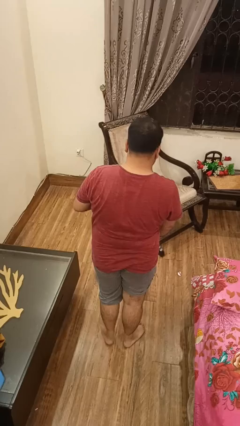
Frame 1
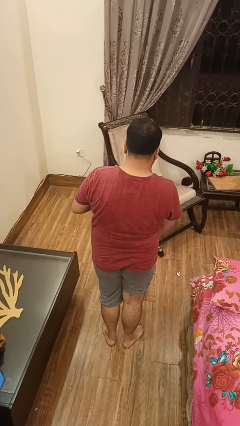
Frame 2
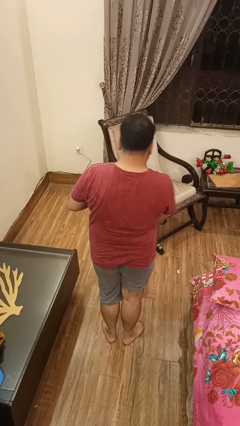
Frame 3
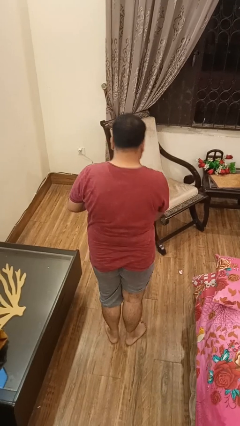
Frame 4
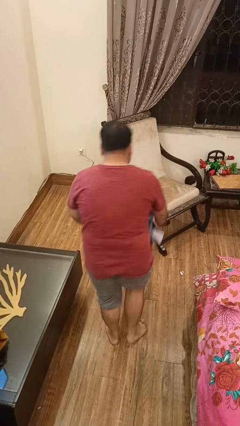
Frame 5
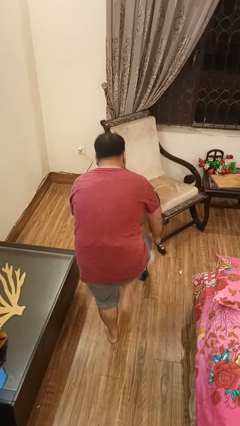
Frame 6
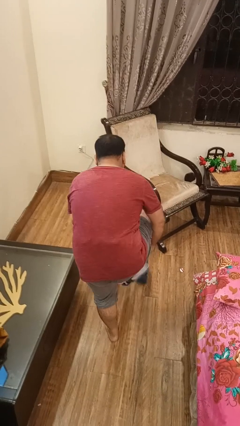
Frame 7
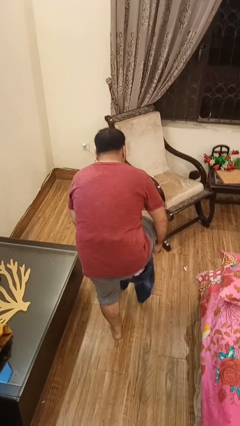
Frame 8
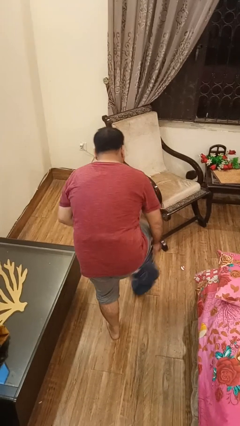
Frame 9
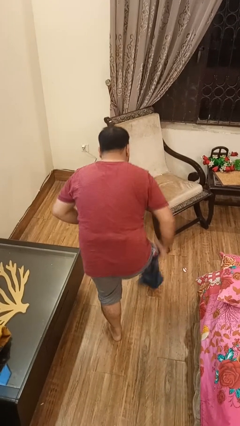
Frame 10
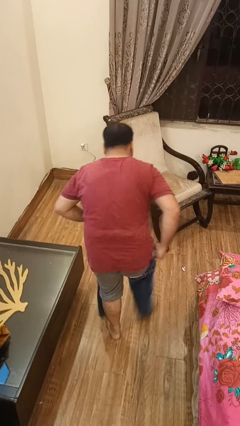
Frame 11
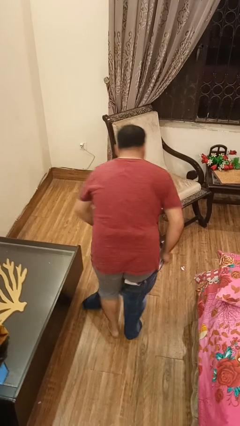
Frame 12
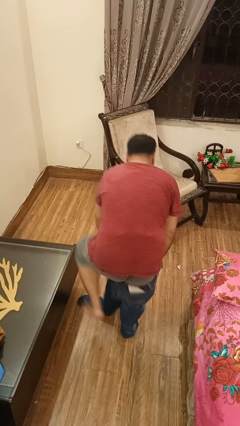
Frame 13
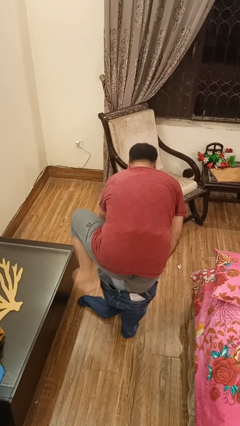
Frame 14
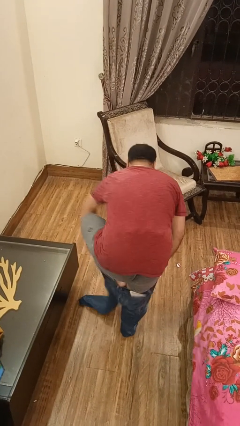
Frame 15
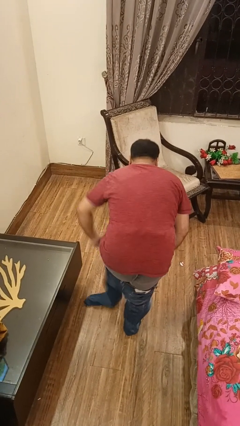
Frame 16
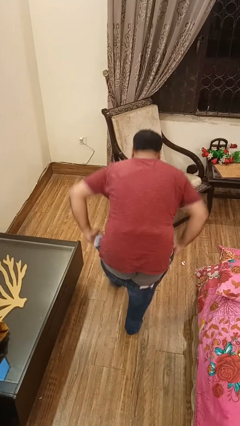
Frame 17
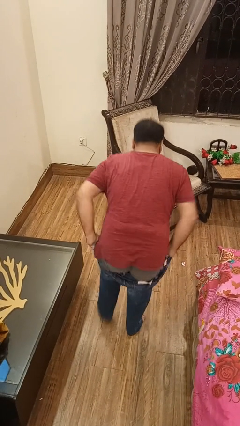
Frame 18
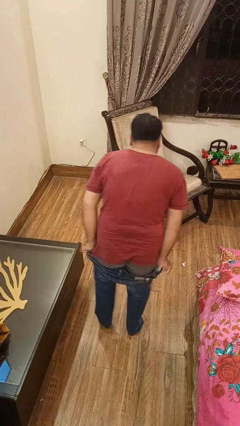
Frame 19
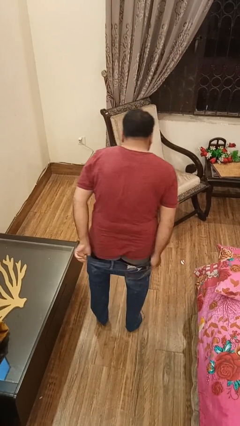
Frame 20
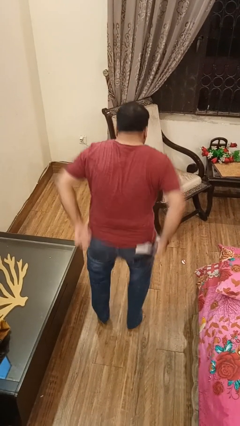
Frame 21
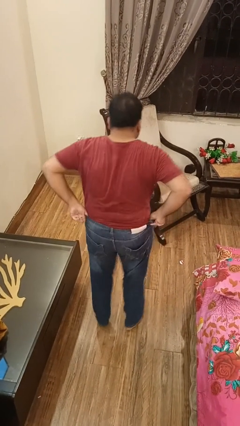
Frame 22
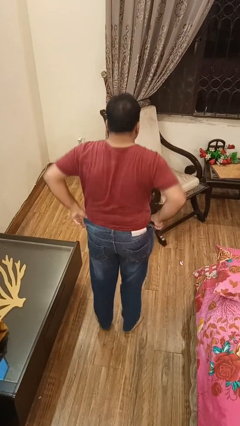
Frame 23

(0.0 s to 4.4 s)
person puts on pants

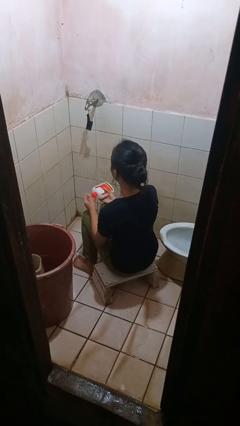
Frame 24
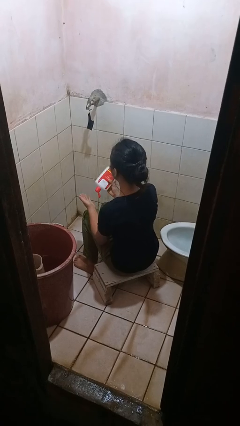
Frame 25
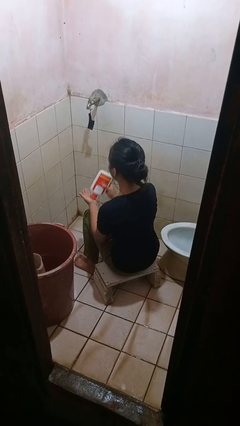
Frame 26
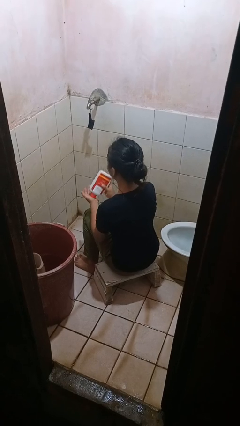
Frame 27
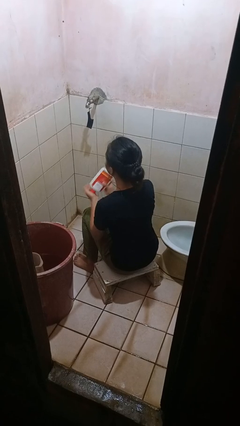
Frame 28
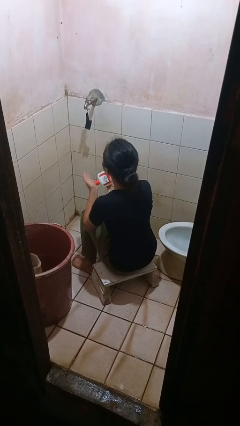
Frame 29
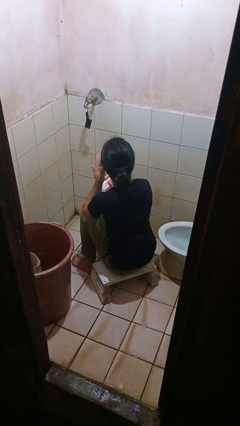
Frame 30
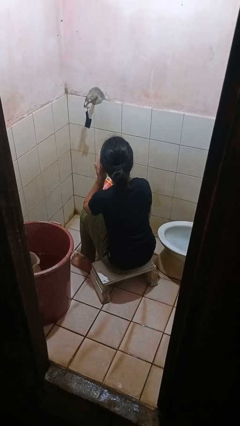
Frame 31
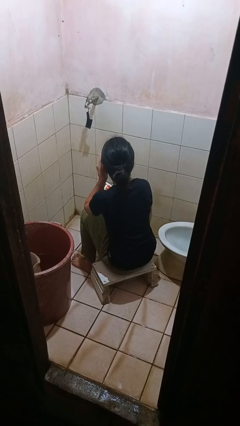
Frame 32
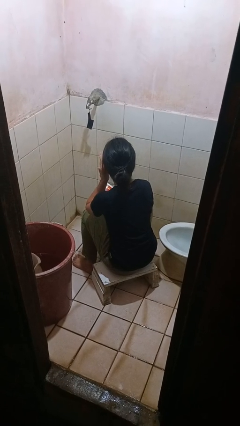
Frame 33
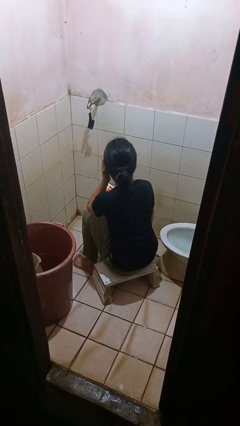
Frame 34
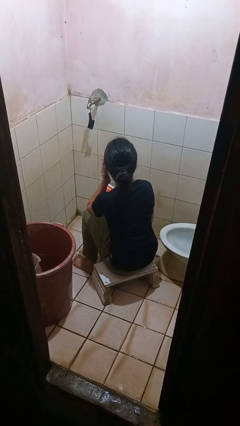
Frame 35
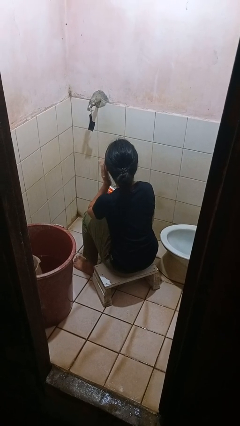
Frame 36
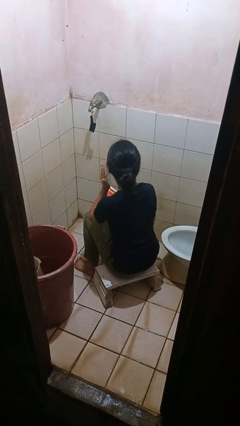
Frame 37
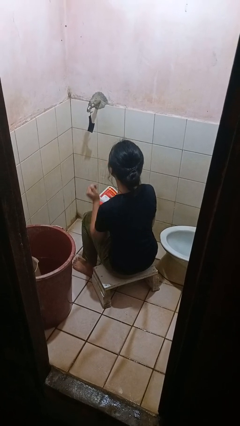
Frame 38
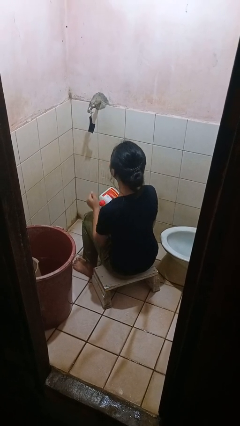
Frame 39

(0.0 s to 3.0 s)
person applies facial moisturizer

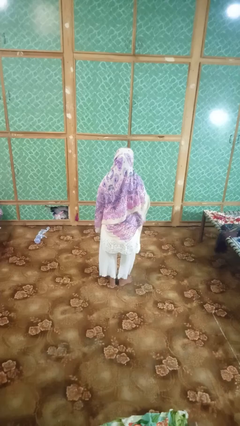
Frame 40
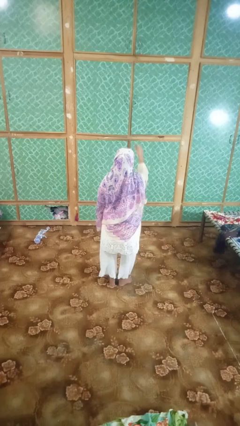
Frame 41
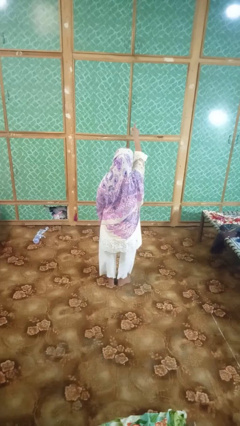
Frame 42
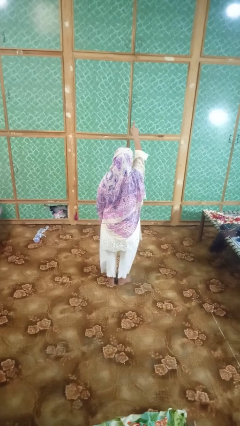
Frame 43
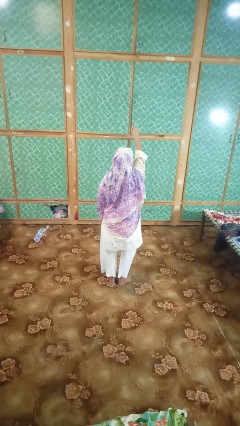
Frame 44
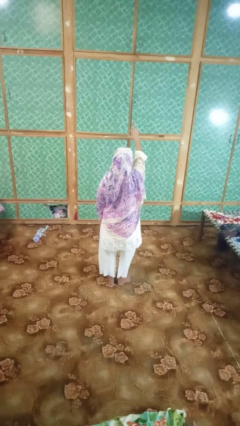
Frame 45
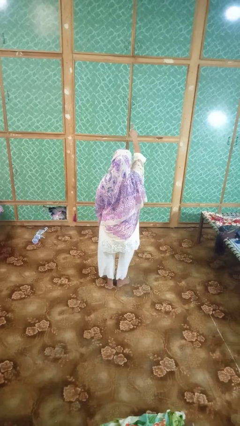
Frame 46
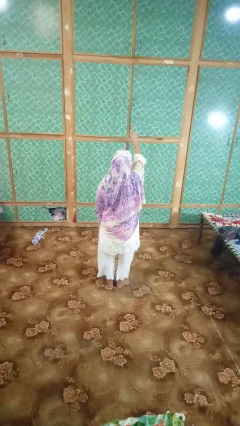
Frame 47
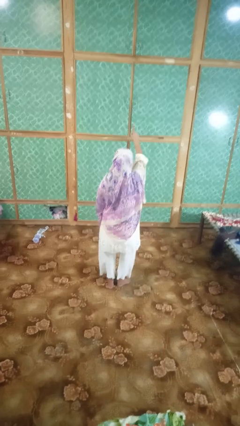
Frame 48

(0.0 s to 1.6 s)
person gestures number one

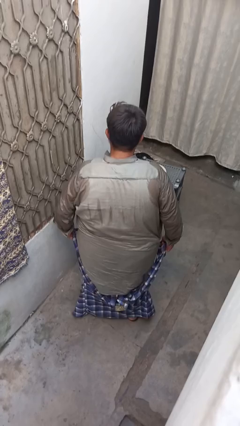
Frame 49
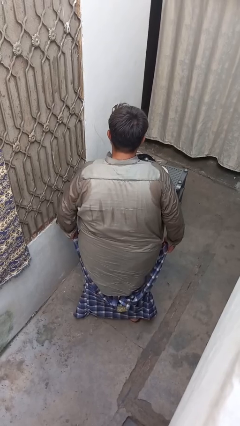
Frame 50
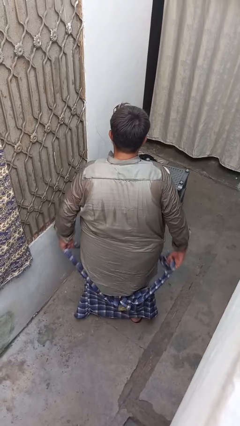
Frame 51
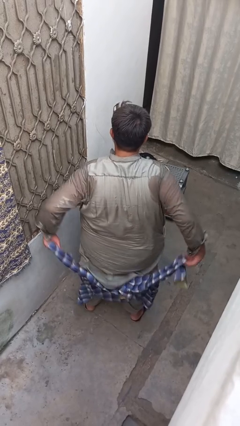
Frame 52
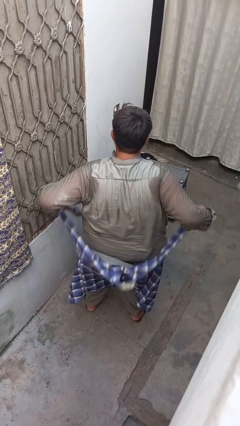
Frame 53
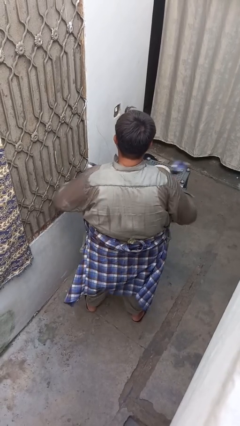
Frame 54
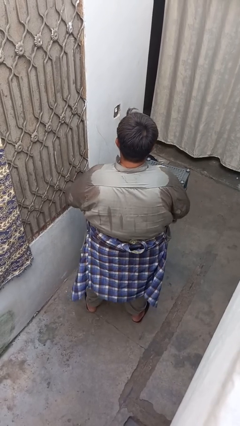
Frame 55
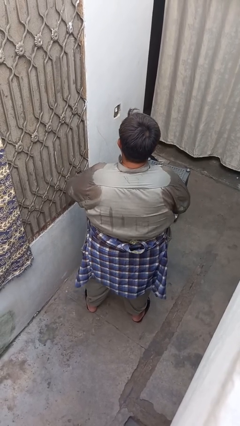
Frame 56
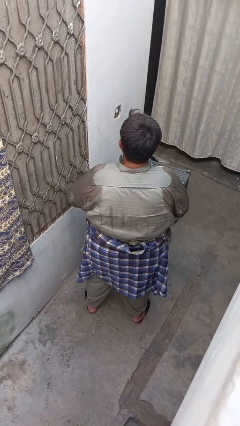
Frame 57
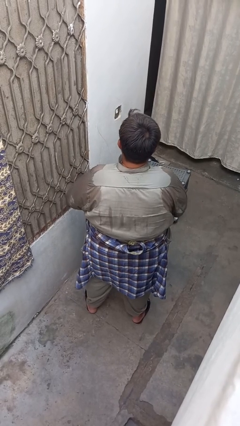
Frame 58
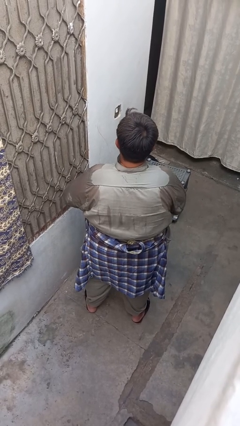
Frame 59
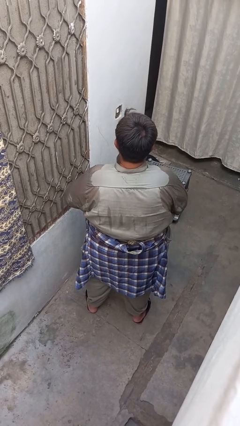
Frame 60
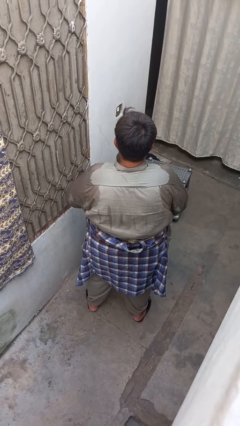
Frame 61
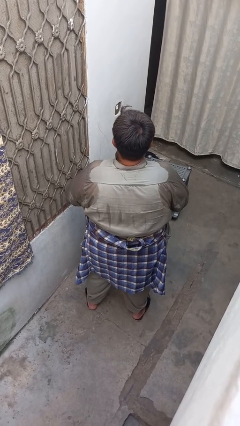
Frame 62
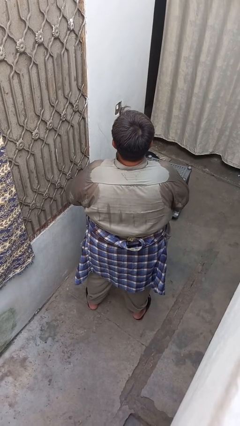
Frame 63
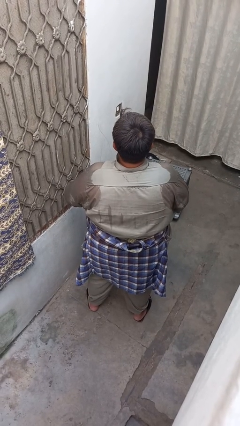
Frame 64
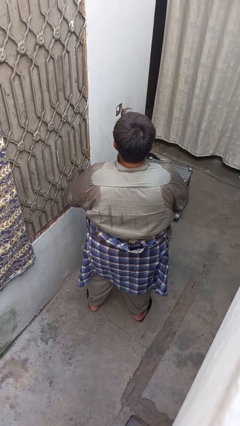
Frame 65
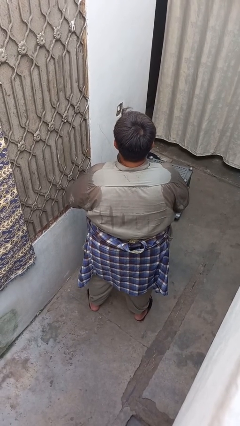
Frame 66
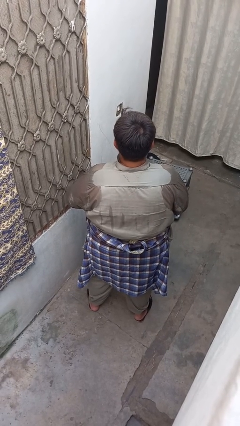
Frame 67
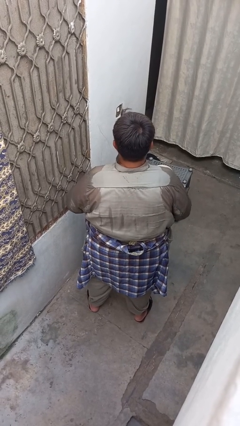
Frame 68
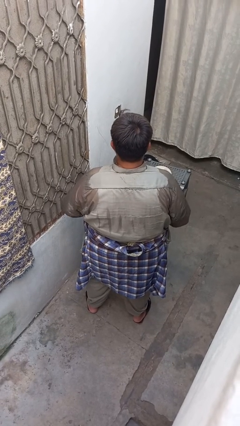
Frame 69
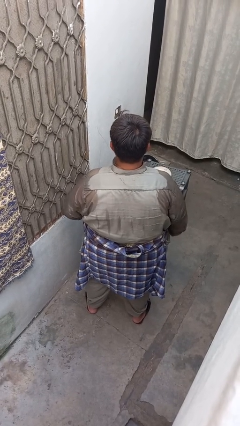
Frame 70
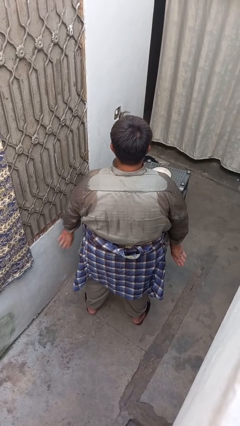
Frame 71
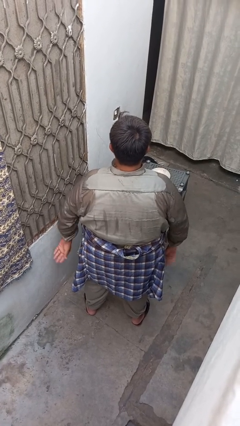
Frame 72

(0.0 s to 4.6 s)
person ties jacket around waist

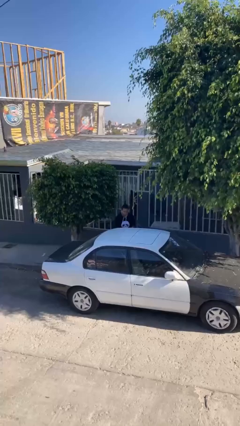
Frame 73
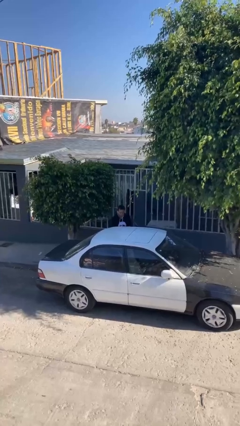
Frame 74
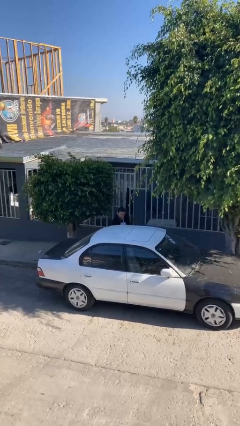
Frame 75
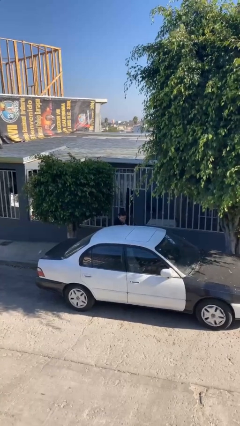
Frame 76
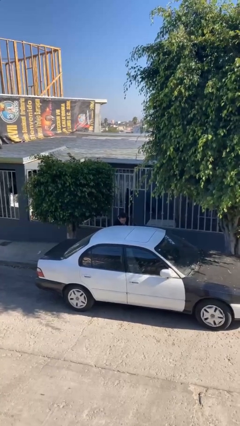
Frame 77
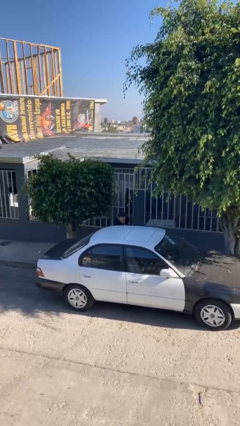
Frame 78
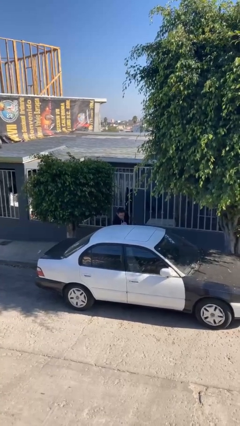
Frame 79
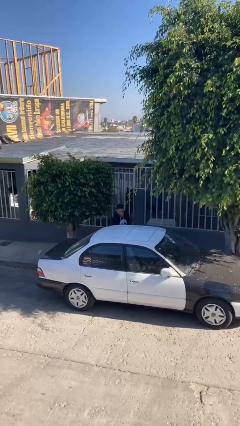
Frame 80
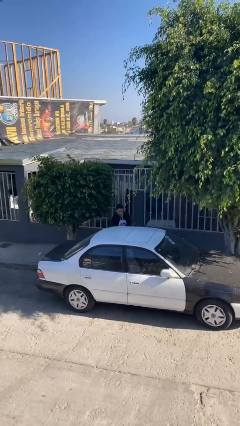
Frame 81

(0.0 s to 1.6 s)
person loads car

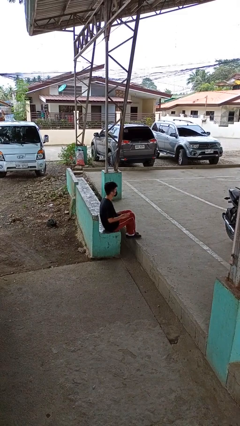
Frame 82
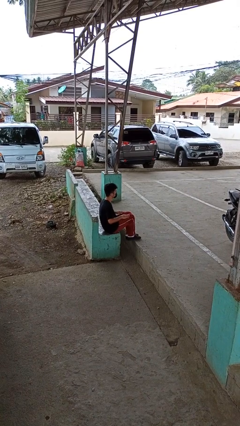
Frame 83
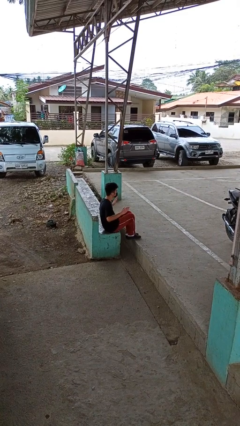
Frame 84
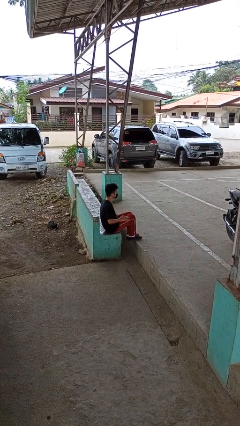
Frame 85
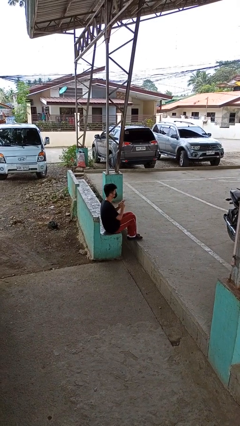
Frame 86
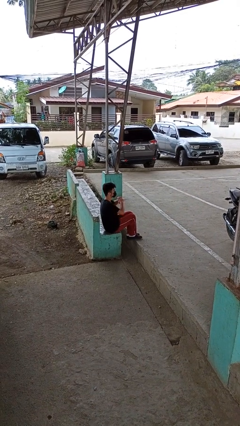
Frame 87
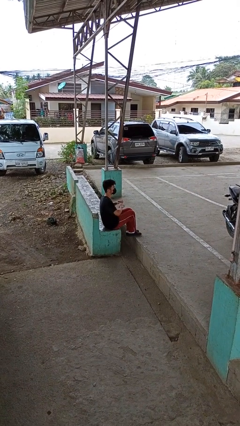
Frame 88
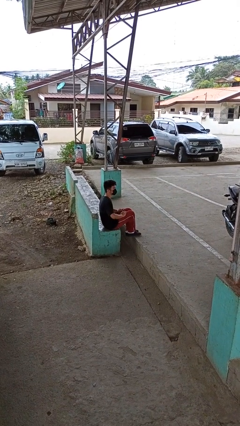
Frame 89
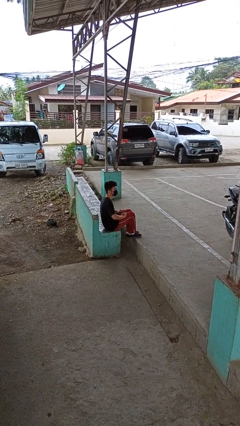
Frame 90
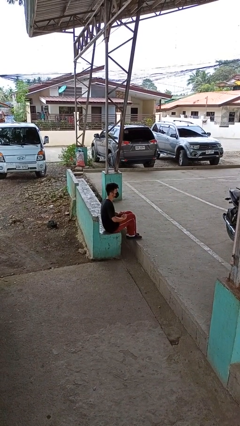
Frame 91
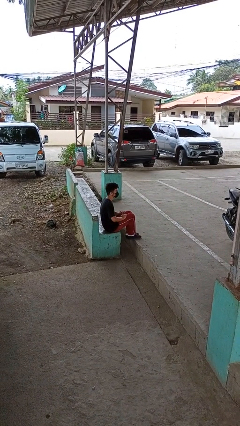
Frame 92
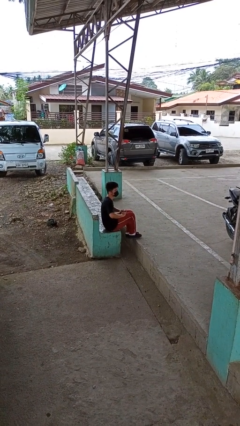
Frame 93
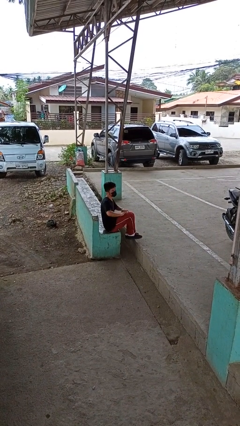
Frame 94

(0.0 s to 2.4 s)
person slaps hands on thighs
